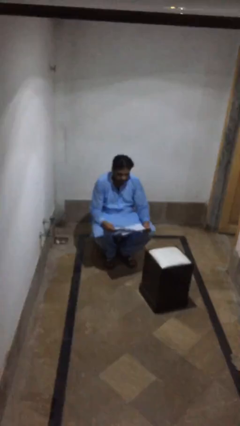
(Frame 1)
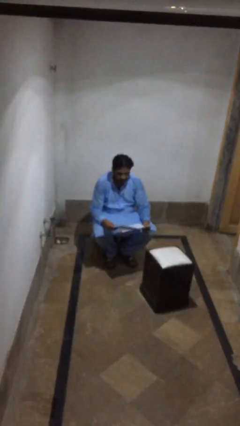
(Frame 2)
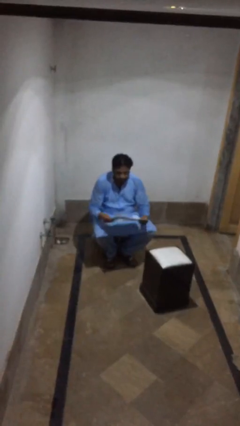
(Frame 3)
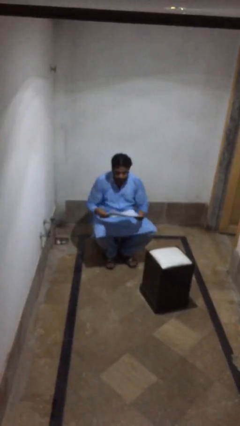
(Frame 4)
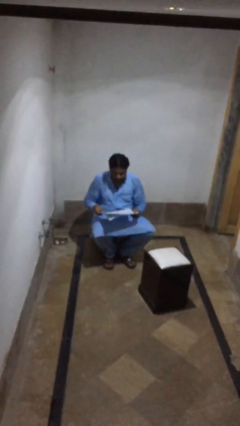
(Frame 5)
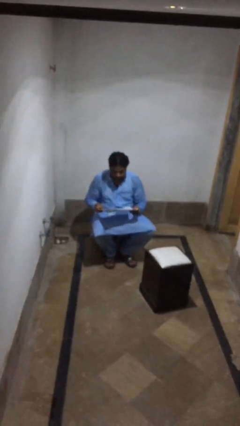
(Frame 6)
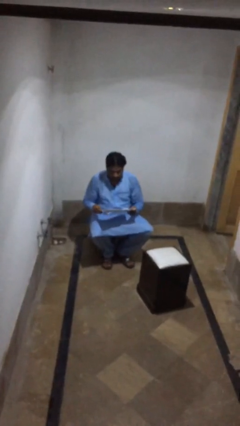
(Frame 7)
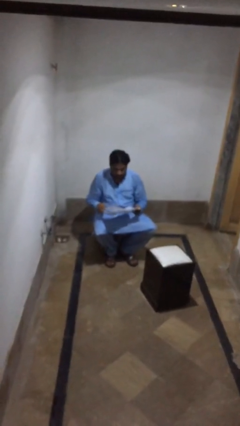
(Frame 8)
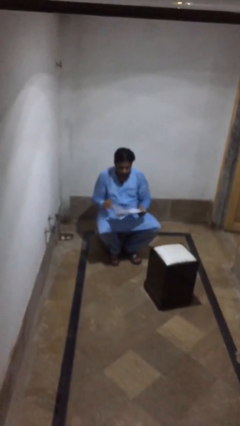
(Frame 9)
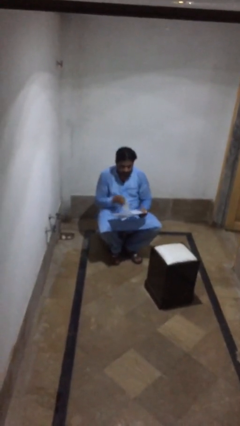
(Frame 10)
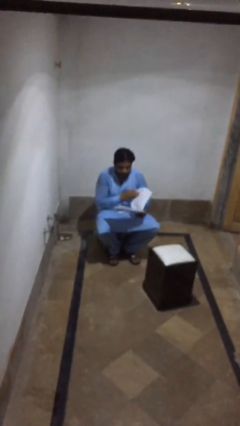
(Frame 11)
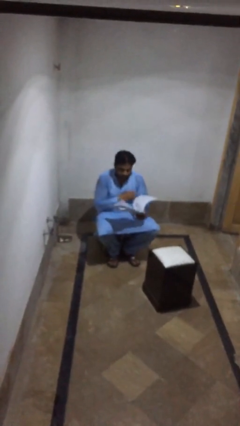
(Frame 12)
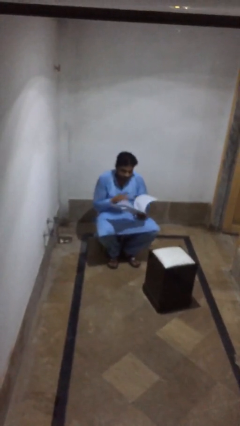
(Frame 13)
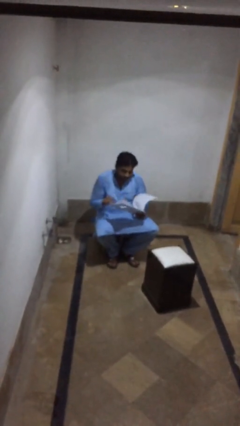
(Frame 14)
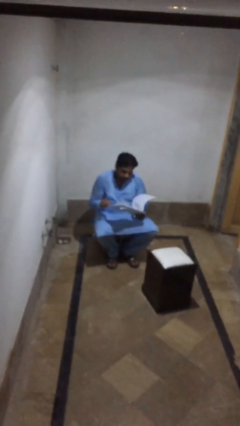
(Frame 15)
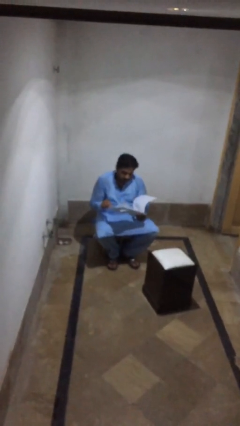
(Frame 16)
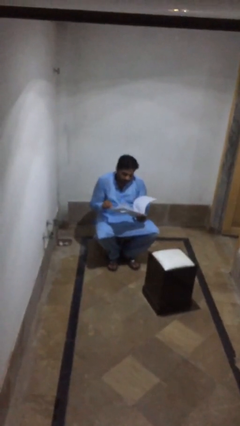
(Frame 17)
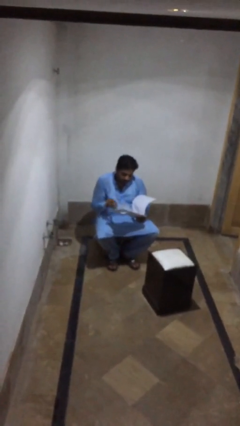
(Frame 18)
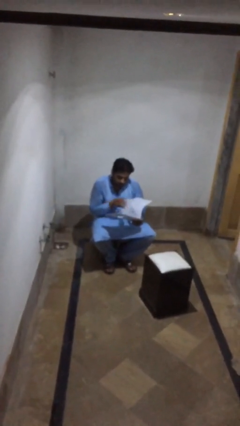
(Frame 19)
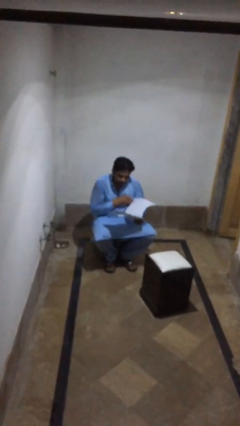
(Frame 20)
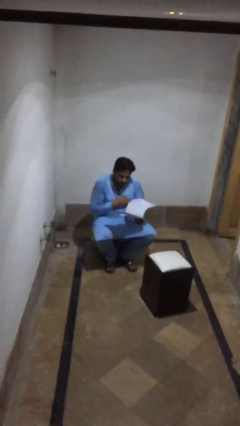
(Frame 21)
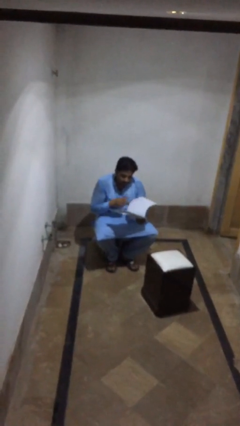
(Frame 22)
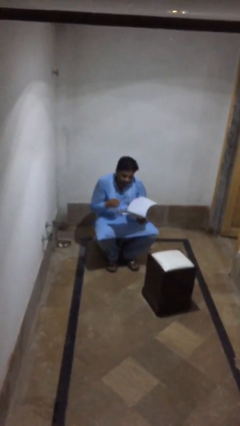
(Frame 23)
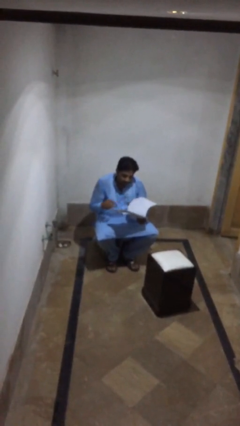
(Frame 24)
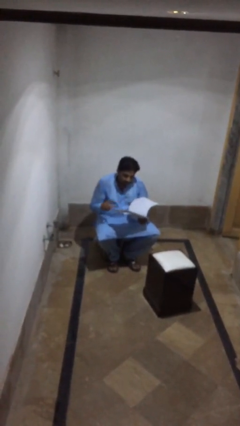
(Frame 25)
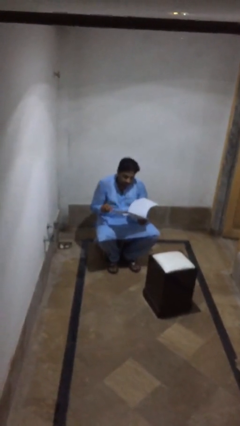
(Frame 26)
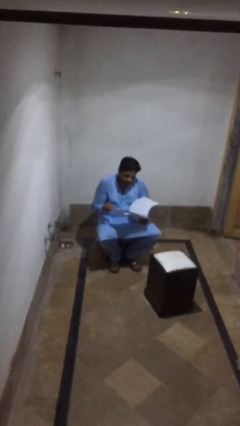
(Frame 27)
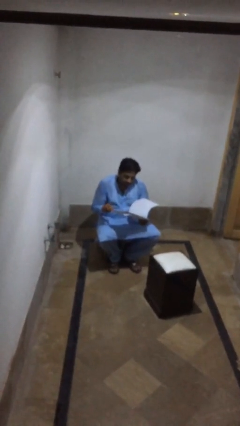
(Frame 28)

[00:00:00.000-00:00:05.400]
person reads document

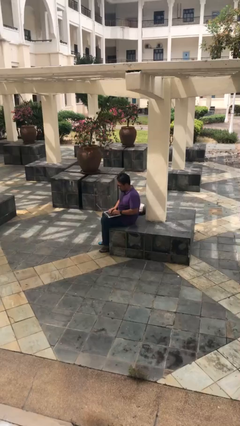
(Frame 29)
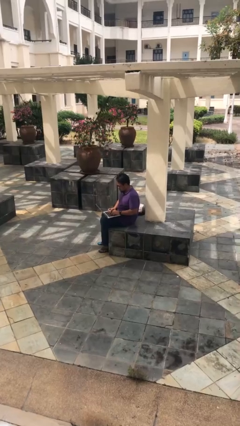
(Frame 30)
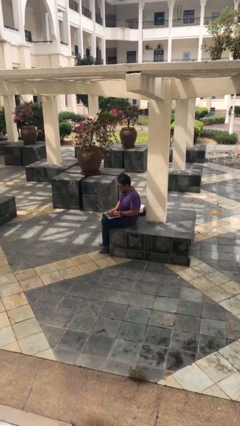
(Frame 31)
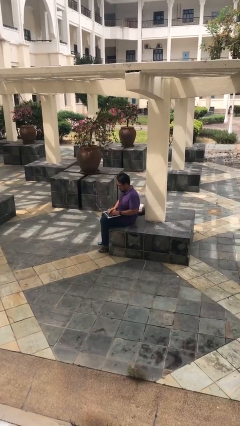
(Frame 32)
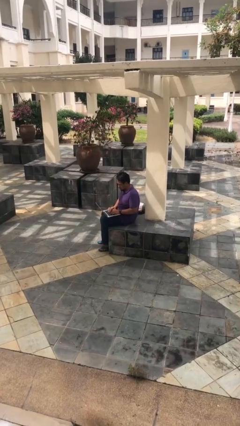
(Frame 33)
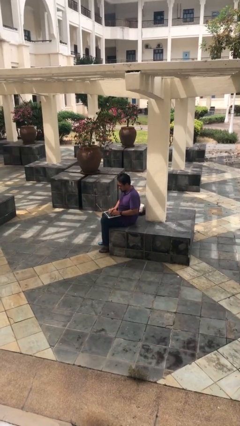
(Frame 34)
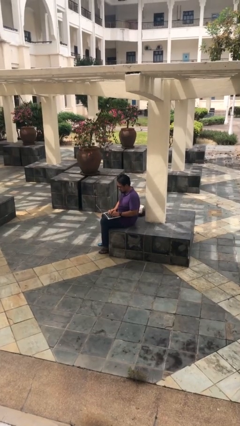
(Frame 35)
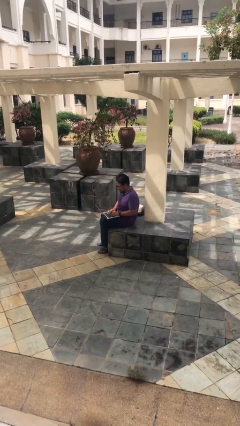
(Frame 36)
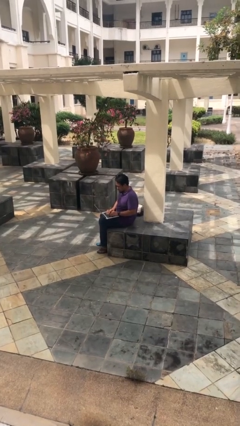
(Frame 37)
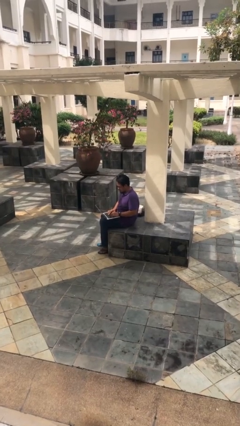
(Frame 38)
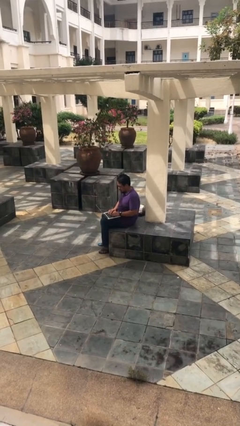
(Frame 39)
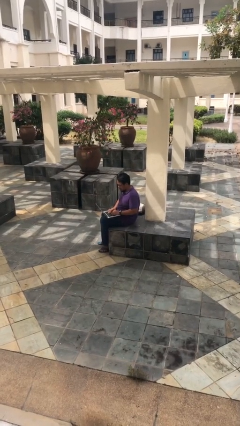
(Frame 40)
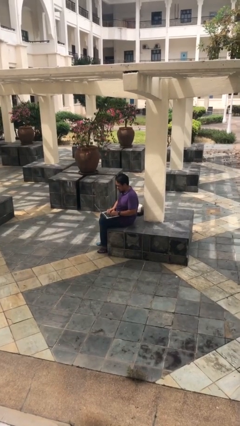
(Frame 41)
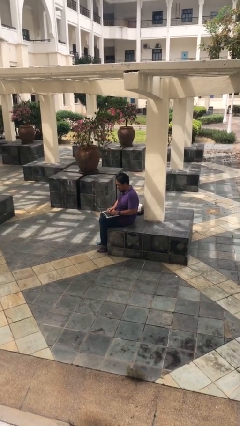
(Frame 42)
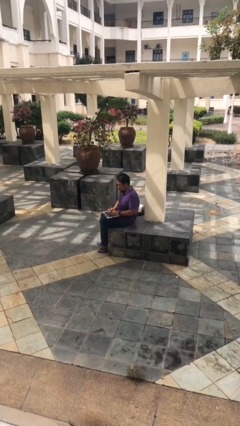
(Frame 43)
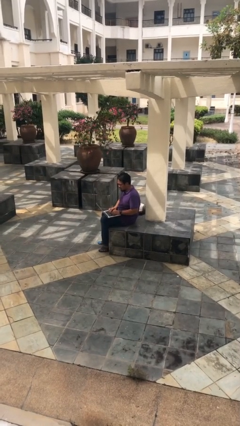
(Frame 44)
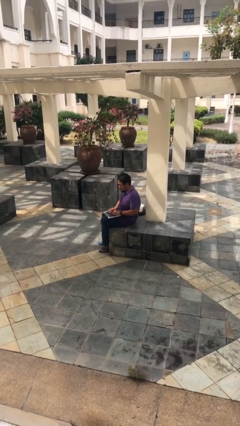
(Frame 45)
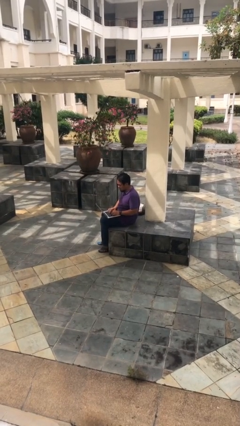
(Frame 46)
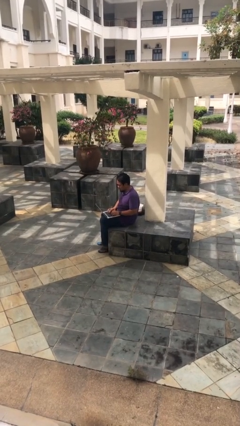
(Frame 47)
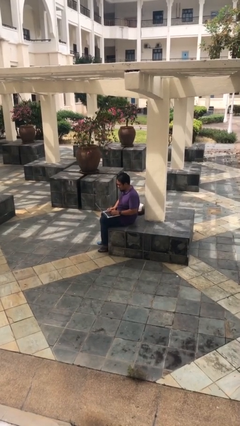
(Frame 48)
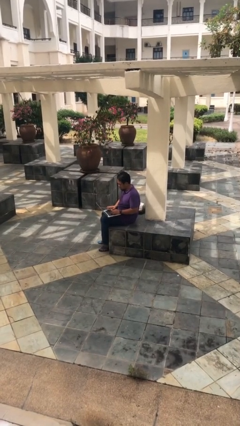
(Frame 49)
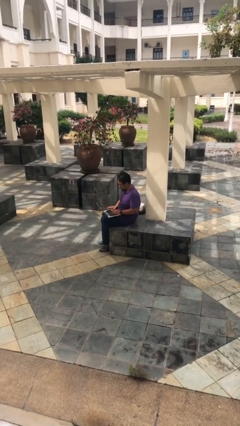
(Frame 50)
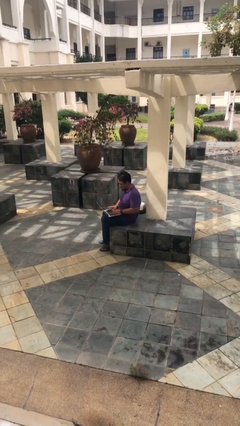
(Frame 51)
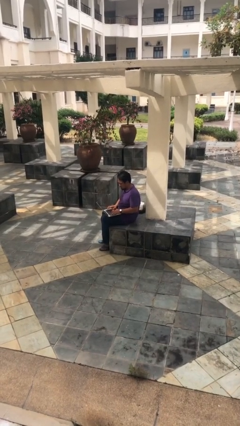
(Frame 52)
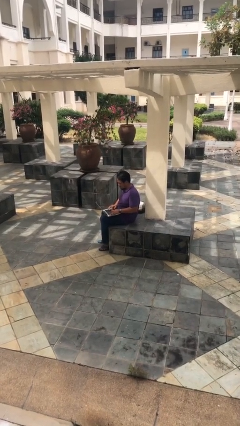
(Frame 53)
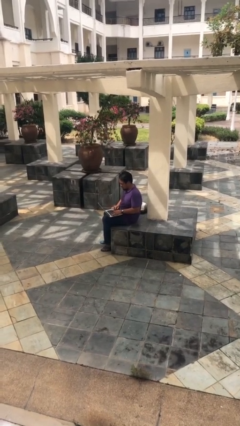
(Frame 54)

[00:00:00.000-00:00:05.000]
person interacts with laptop

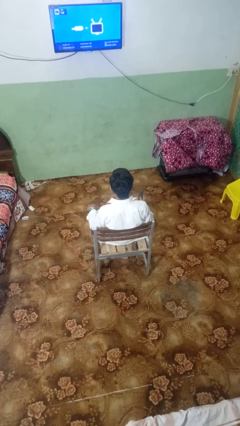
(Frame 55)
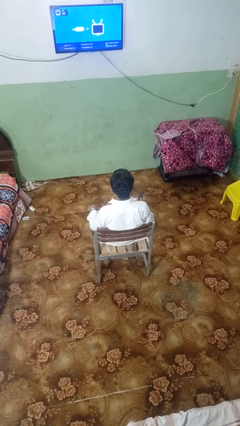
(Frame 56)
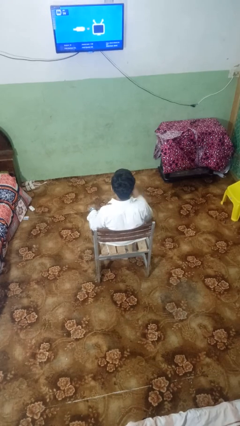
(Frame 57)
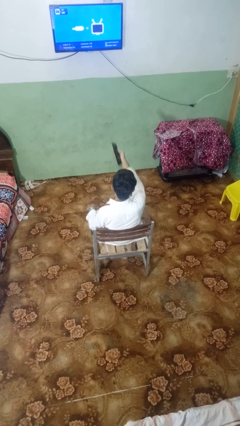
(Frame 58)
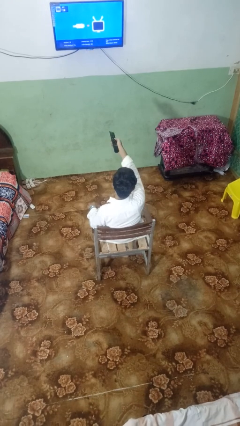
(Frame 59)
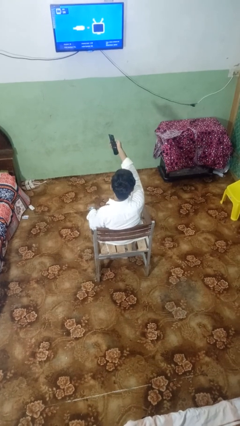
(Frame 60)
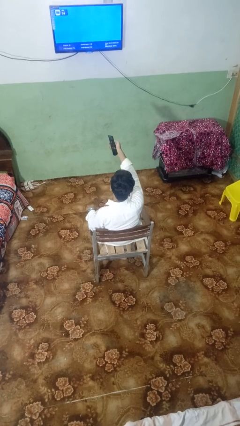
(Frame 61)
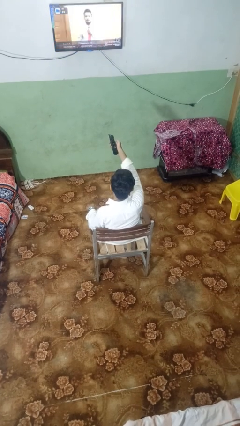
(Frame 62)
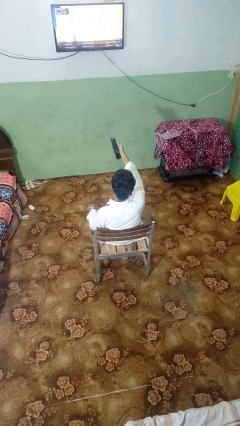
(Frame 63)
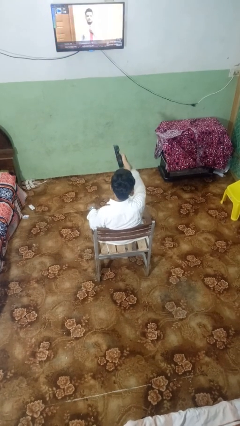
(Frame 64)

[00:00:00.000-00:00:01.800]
person uses television remote

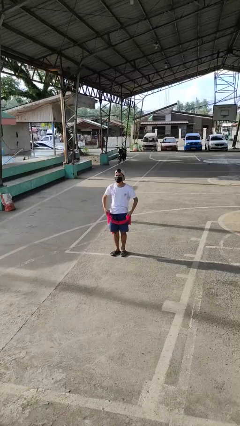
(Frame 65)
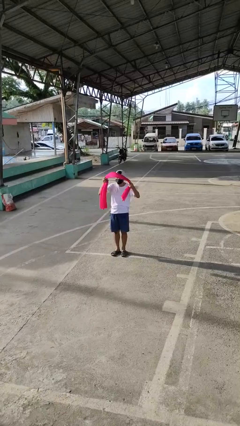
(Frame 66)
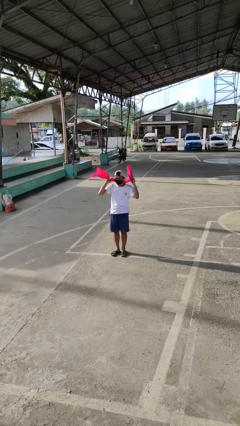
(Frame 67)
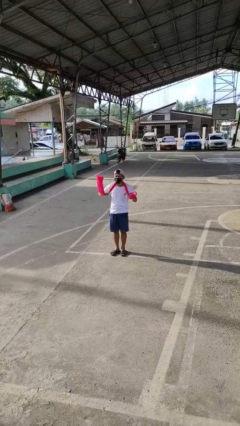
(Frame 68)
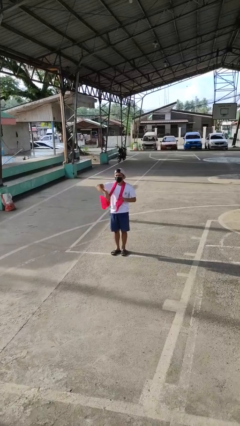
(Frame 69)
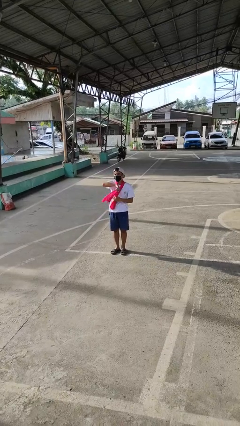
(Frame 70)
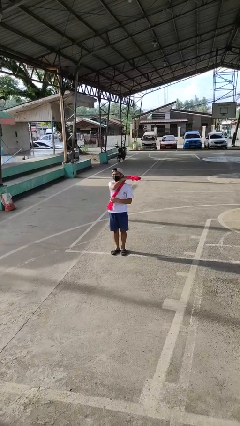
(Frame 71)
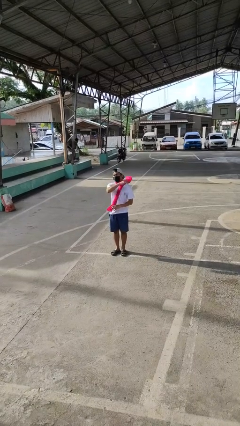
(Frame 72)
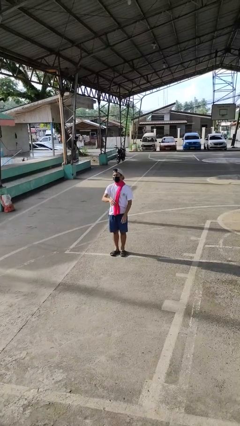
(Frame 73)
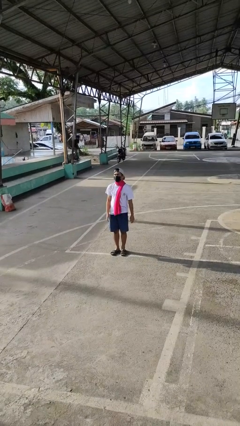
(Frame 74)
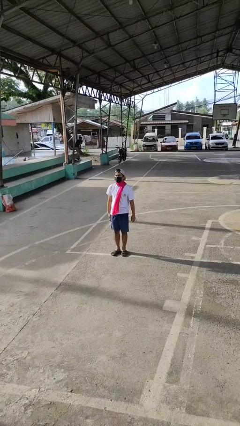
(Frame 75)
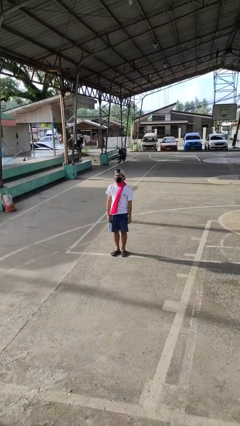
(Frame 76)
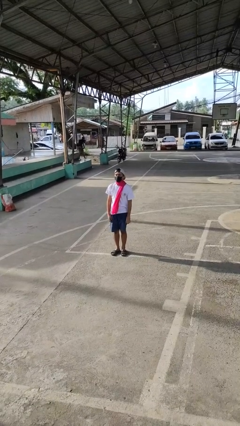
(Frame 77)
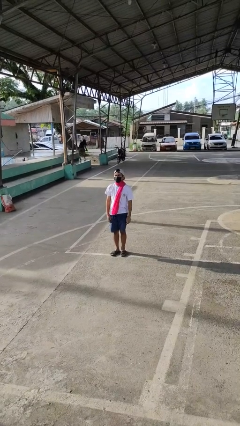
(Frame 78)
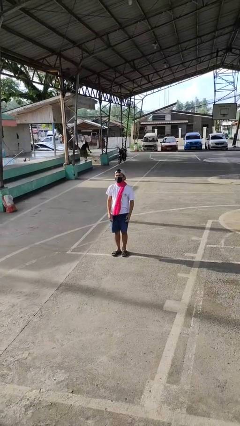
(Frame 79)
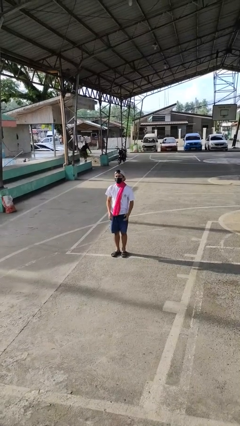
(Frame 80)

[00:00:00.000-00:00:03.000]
person puts on scarf

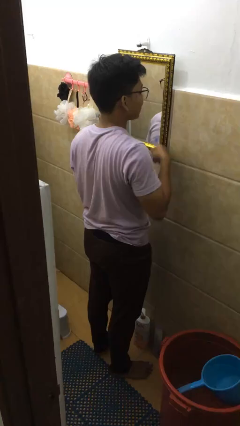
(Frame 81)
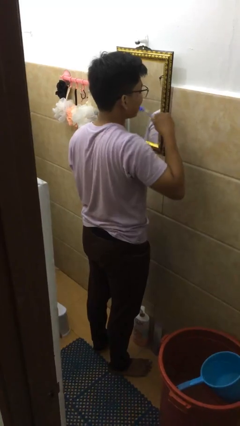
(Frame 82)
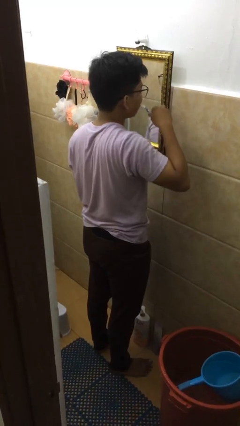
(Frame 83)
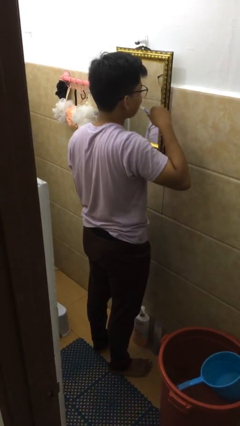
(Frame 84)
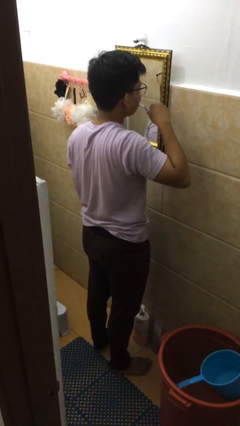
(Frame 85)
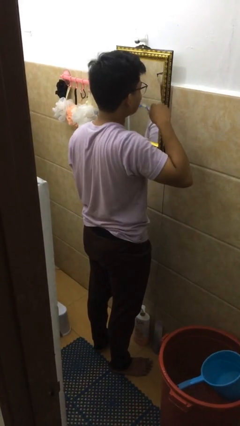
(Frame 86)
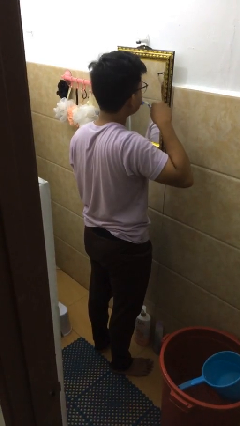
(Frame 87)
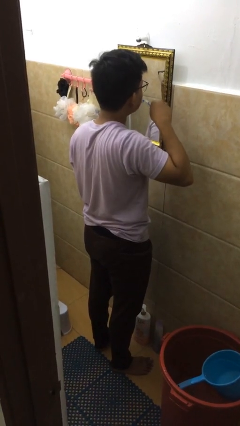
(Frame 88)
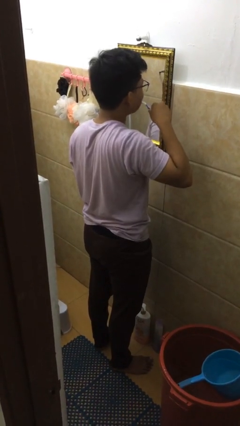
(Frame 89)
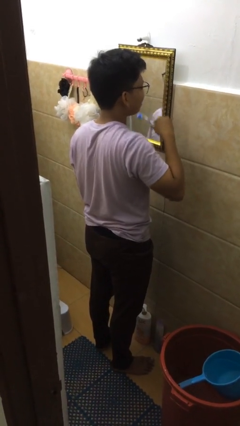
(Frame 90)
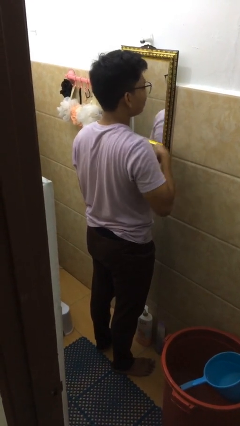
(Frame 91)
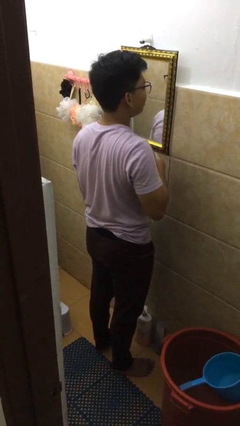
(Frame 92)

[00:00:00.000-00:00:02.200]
person brushes teeth
